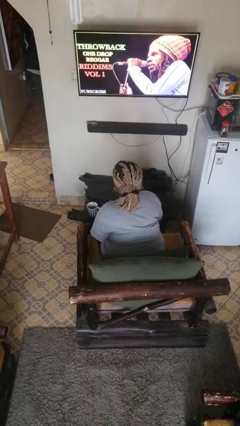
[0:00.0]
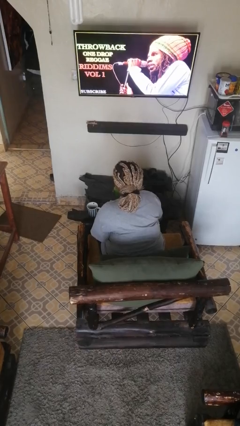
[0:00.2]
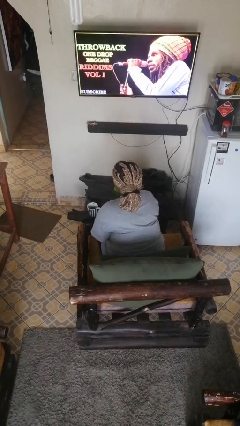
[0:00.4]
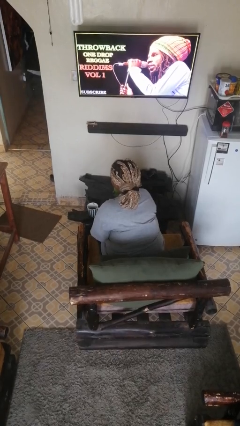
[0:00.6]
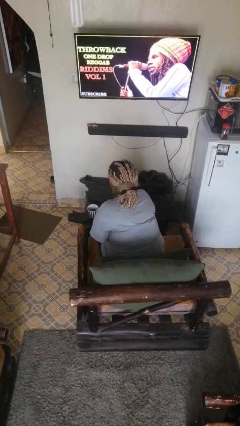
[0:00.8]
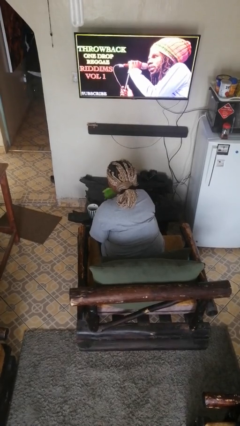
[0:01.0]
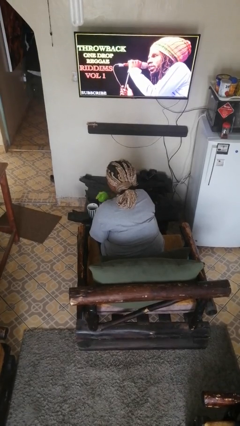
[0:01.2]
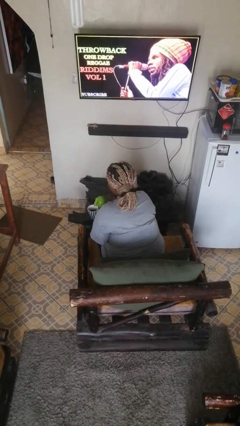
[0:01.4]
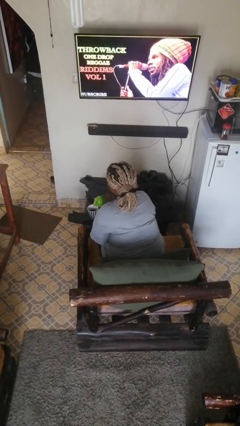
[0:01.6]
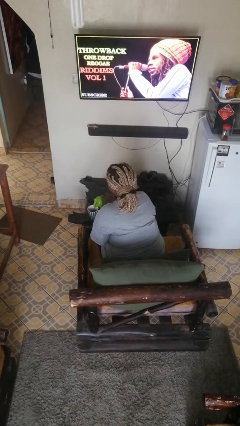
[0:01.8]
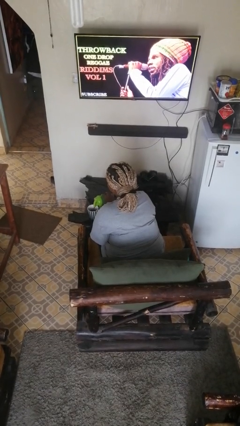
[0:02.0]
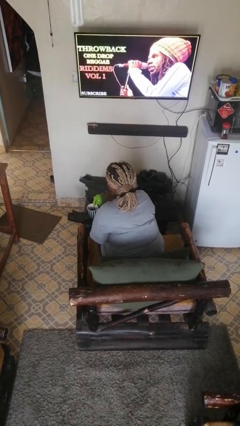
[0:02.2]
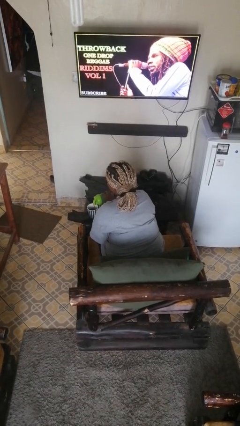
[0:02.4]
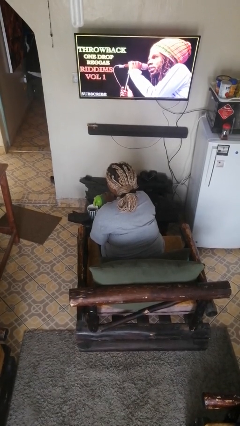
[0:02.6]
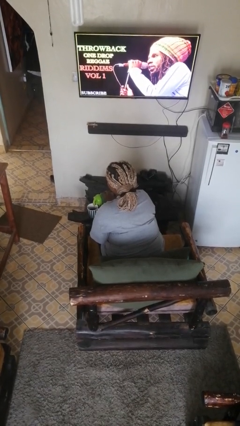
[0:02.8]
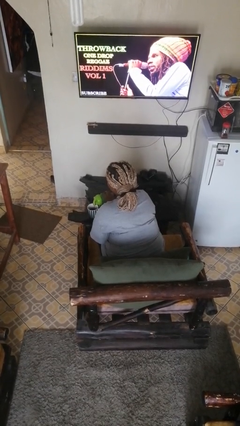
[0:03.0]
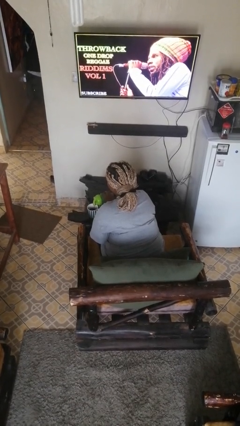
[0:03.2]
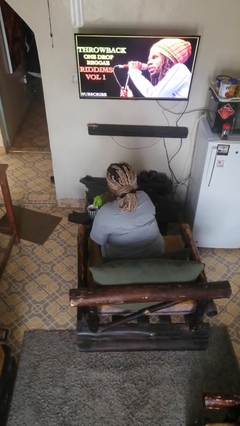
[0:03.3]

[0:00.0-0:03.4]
person pours coffee into mug

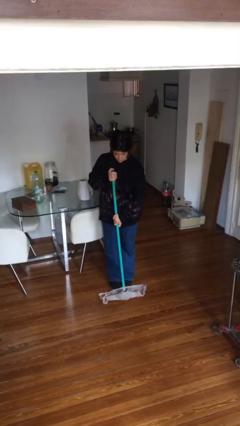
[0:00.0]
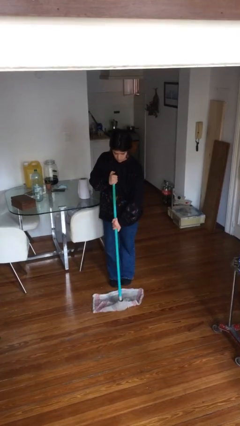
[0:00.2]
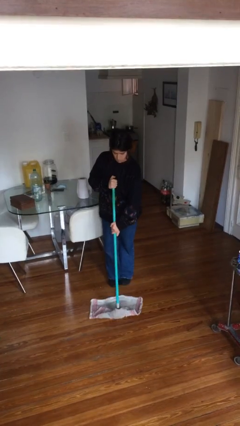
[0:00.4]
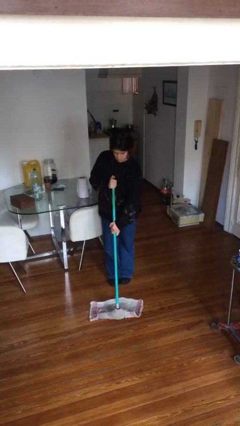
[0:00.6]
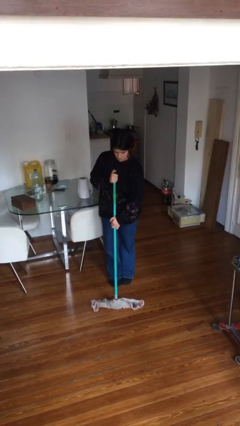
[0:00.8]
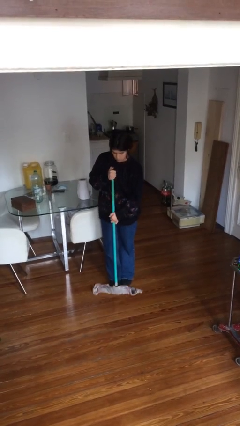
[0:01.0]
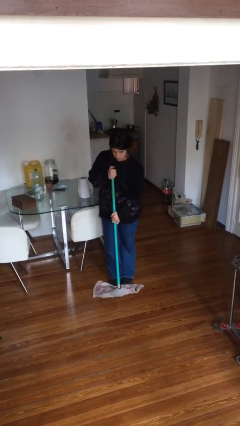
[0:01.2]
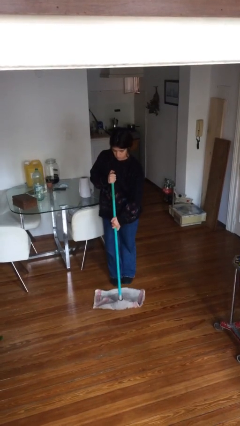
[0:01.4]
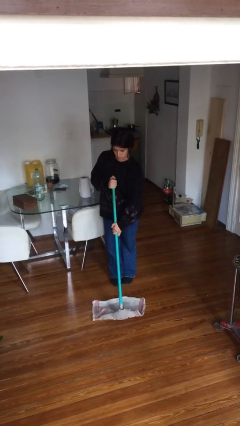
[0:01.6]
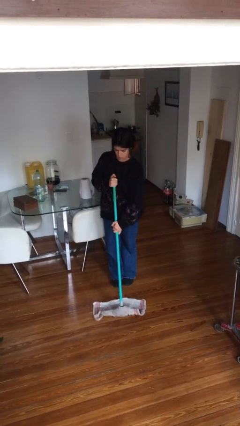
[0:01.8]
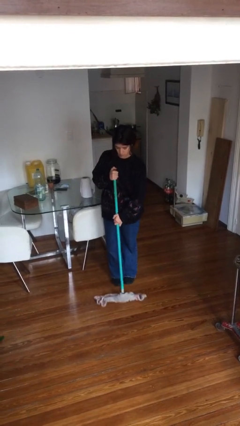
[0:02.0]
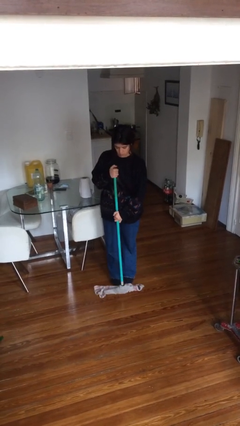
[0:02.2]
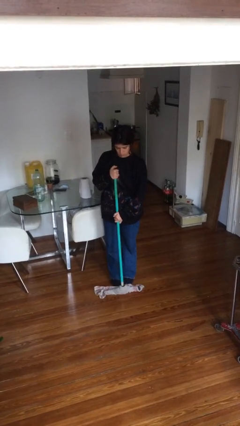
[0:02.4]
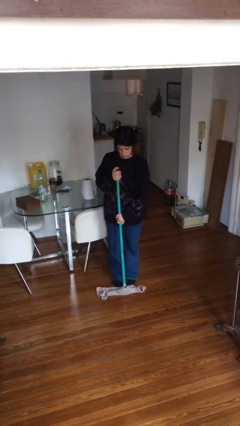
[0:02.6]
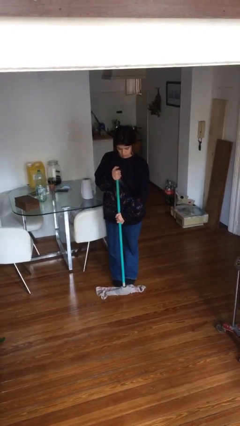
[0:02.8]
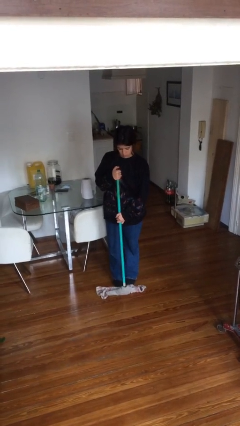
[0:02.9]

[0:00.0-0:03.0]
person mops

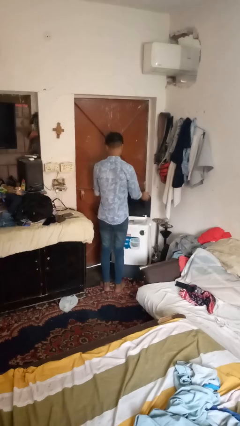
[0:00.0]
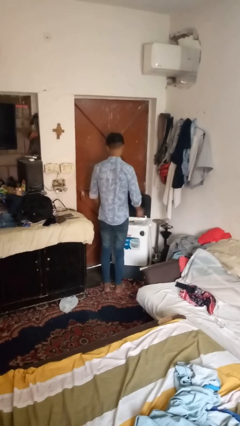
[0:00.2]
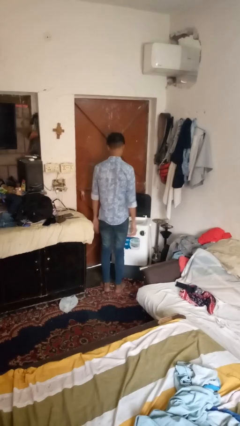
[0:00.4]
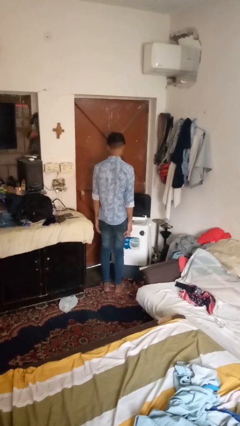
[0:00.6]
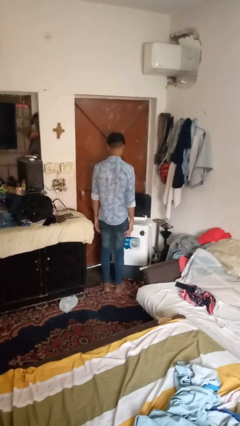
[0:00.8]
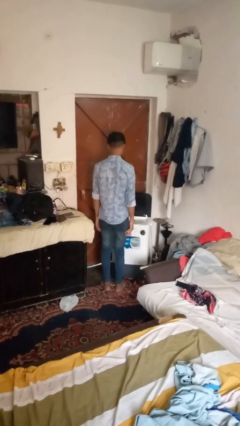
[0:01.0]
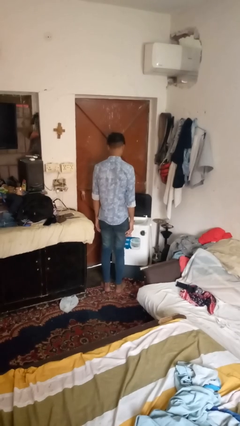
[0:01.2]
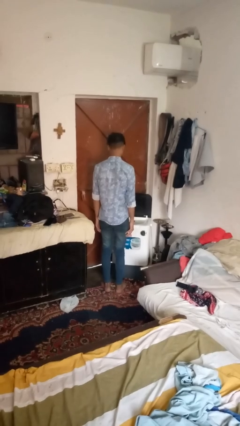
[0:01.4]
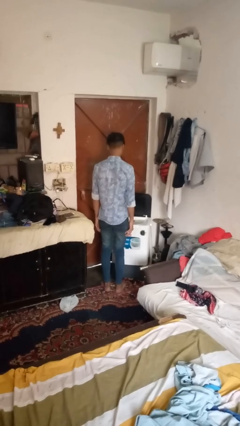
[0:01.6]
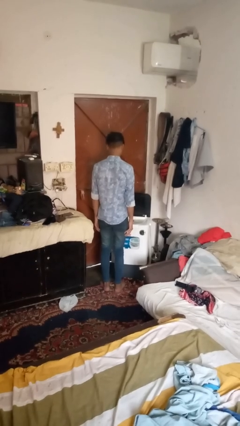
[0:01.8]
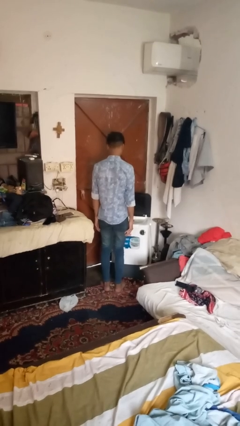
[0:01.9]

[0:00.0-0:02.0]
person opens clothes washer

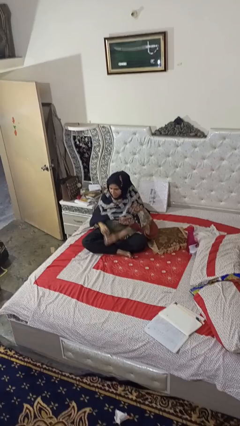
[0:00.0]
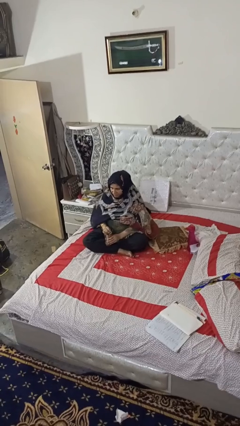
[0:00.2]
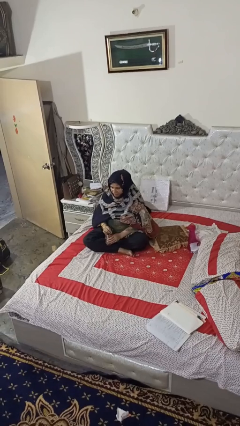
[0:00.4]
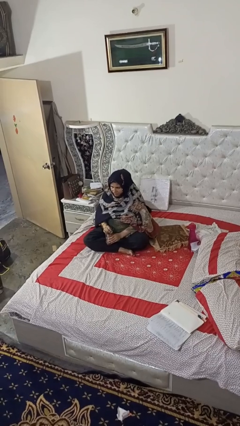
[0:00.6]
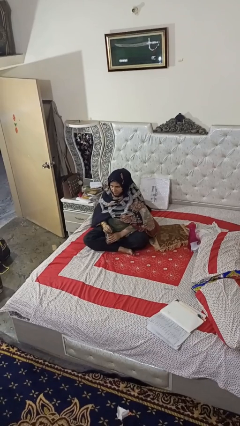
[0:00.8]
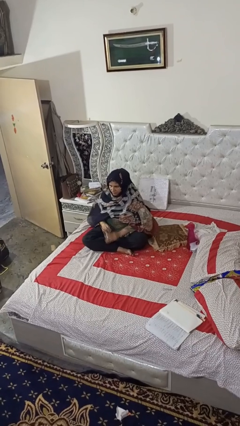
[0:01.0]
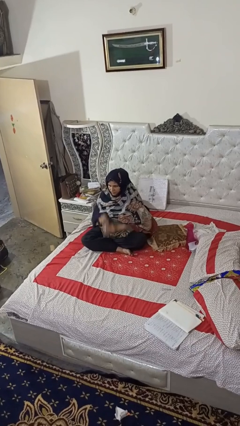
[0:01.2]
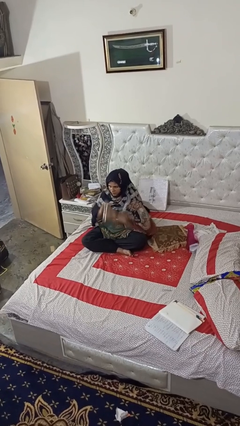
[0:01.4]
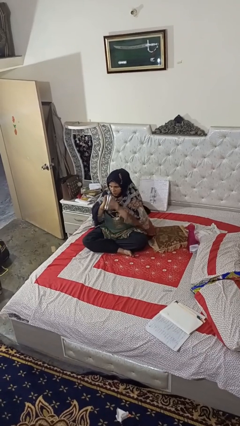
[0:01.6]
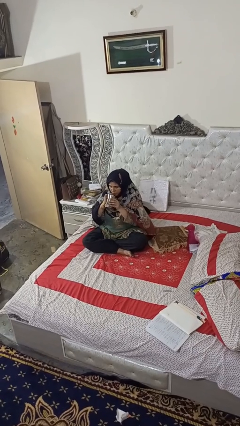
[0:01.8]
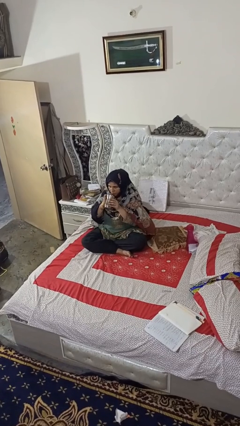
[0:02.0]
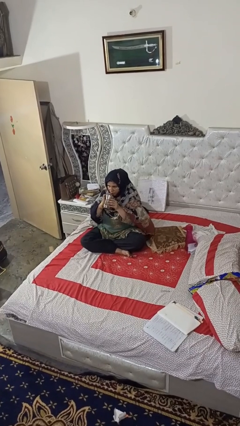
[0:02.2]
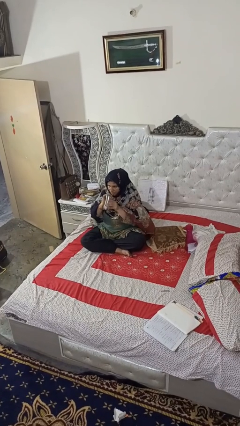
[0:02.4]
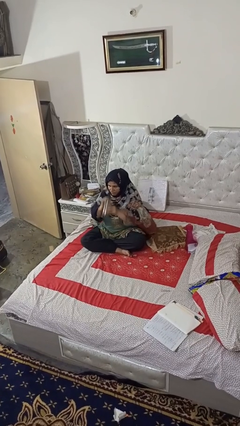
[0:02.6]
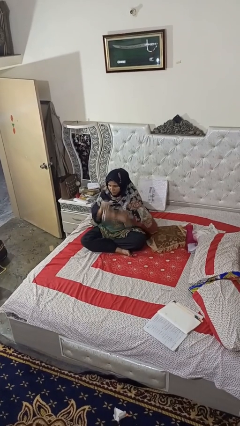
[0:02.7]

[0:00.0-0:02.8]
person drinks from straw

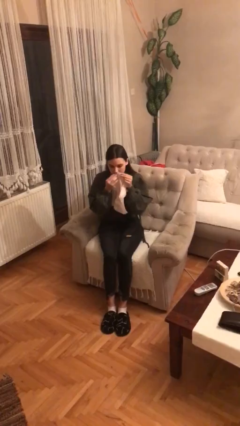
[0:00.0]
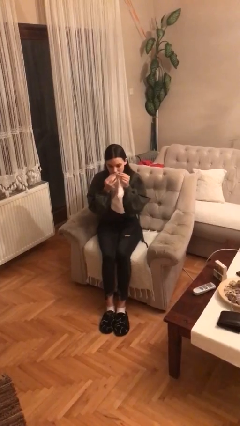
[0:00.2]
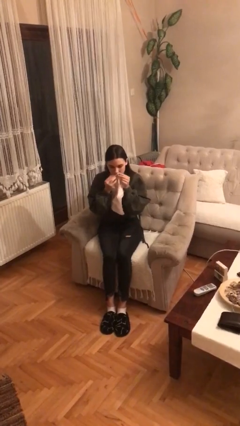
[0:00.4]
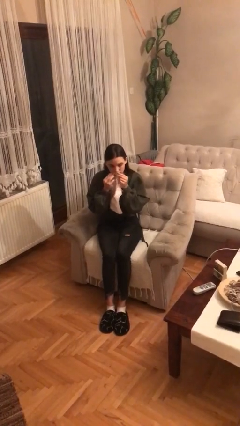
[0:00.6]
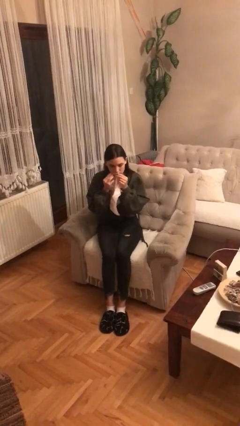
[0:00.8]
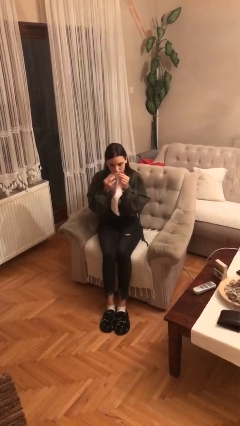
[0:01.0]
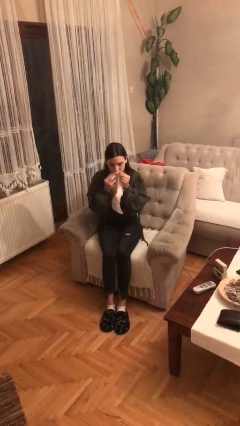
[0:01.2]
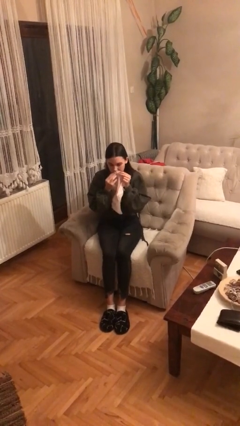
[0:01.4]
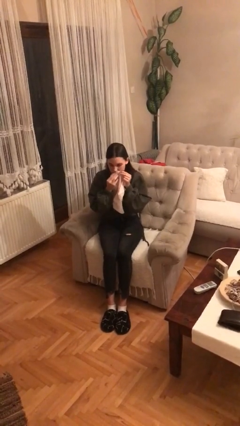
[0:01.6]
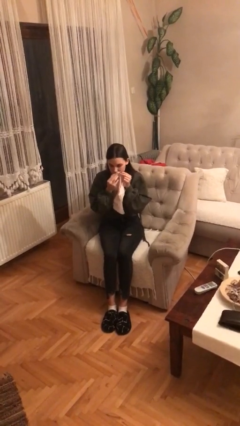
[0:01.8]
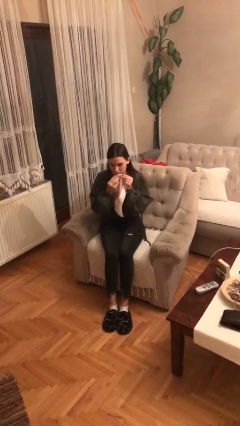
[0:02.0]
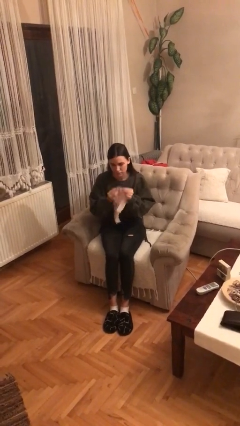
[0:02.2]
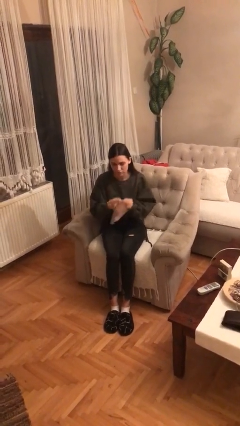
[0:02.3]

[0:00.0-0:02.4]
person wipes mouth with napkin

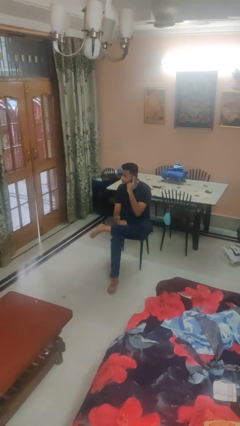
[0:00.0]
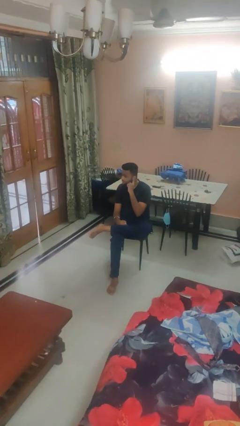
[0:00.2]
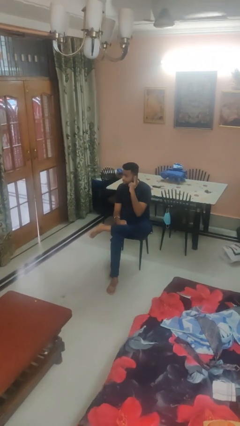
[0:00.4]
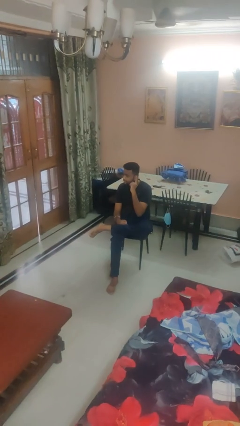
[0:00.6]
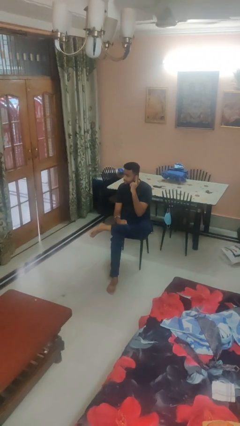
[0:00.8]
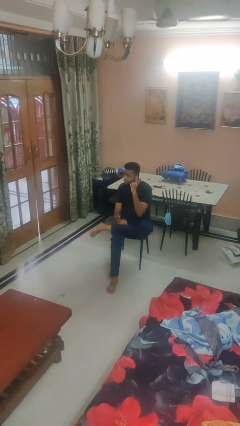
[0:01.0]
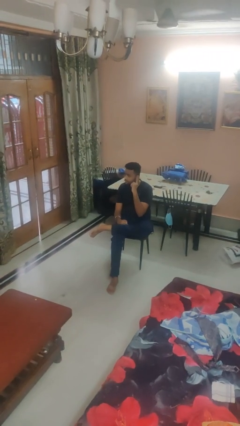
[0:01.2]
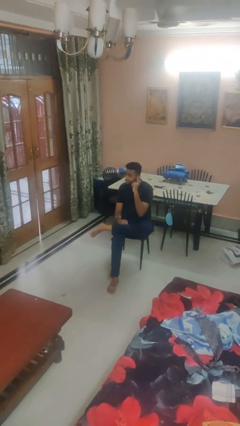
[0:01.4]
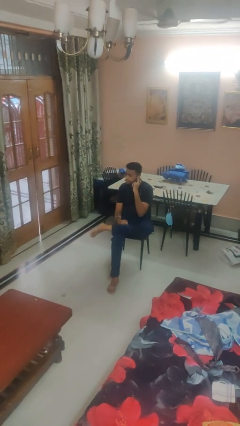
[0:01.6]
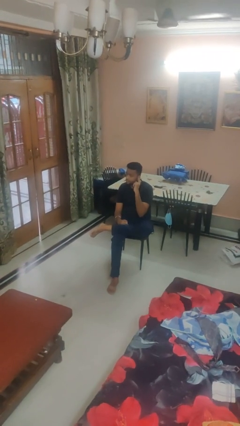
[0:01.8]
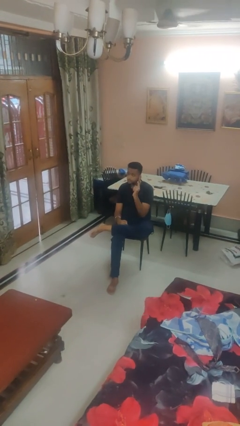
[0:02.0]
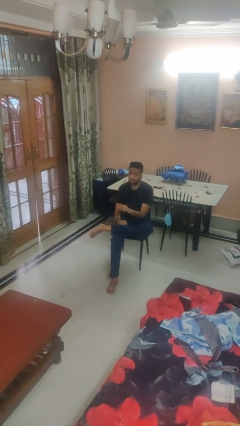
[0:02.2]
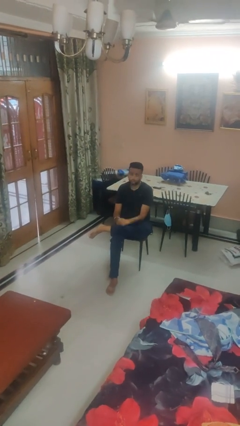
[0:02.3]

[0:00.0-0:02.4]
person gestures listen closely

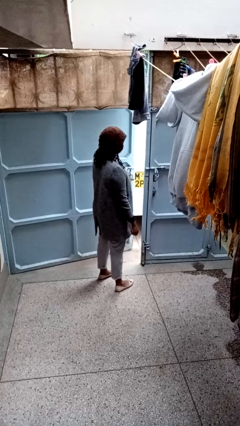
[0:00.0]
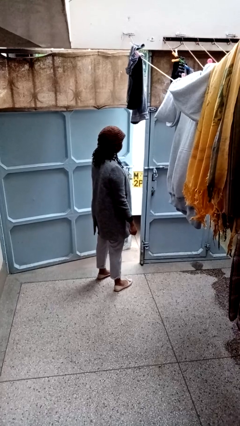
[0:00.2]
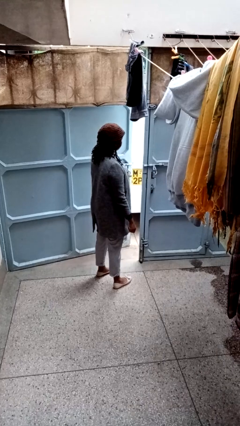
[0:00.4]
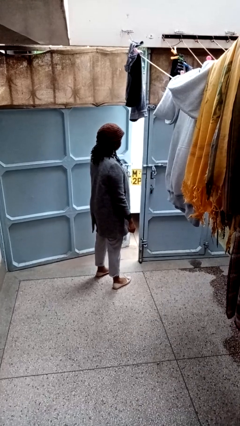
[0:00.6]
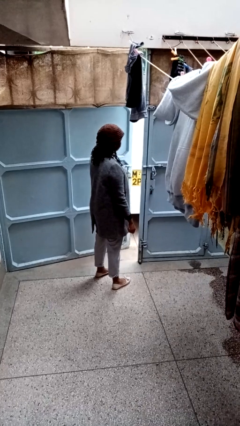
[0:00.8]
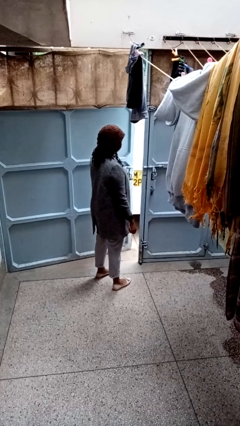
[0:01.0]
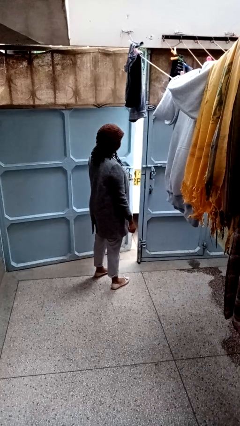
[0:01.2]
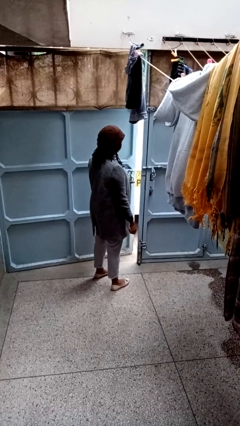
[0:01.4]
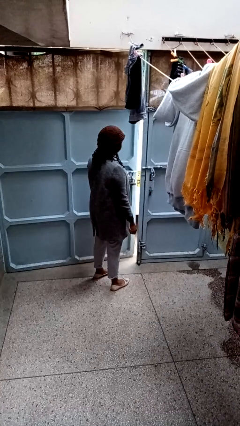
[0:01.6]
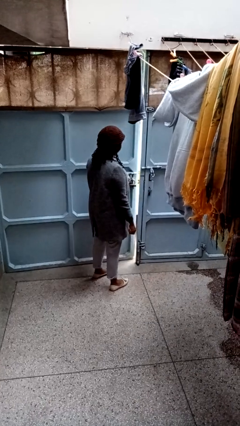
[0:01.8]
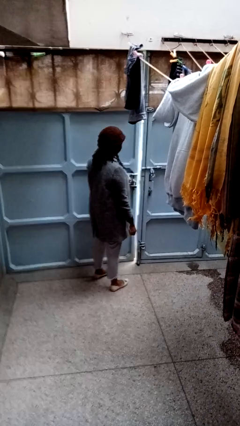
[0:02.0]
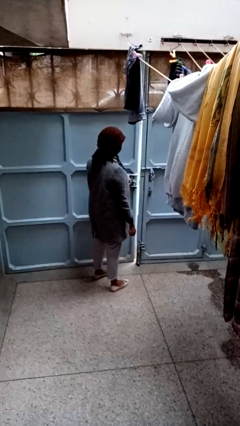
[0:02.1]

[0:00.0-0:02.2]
person closes gate
